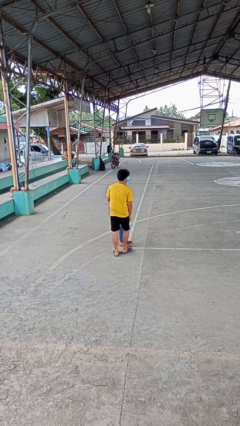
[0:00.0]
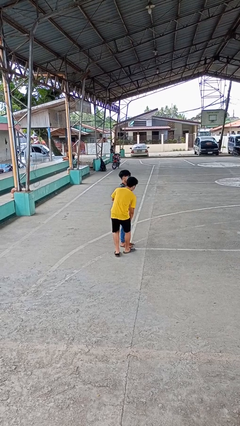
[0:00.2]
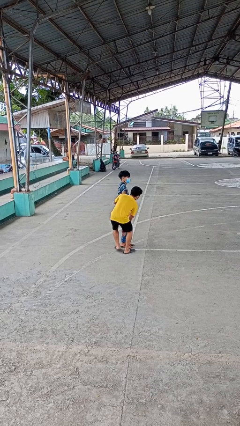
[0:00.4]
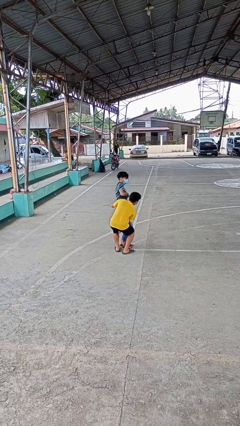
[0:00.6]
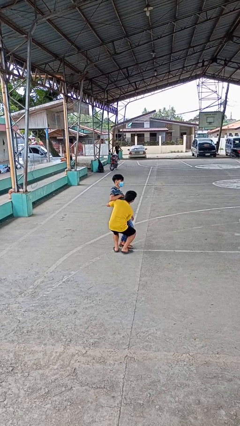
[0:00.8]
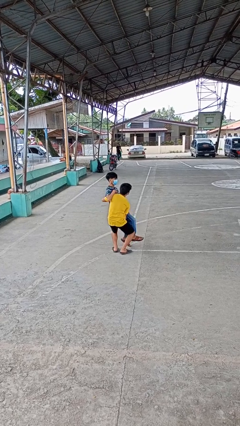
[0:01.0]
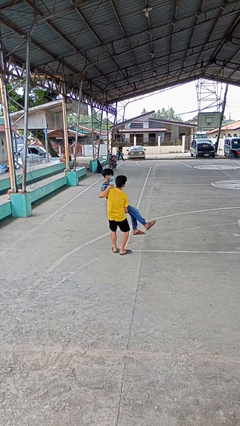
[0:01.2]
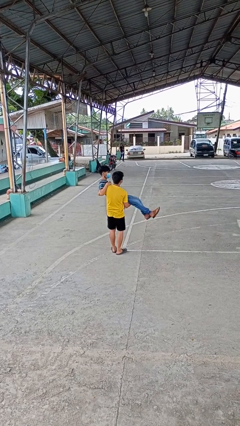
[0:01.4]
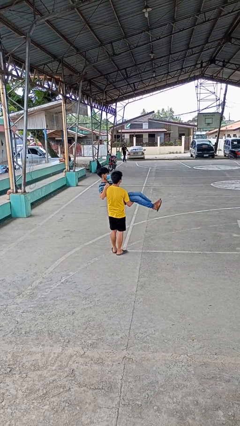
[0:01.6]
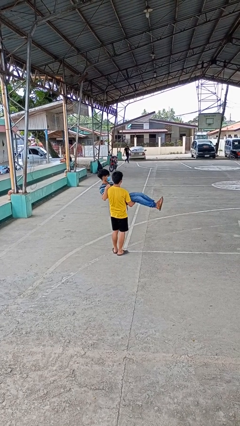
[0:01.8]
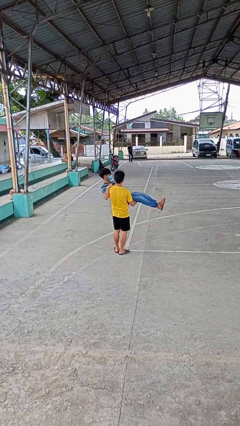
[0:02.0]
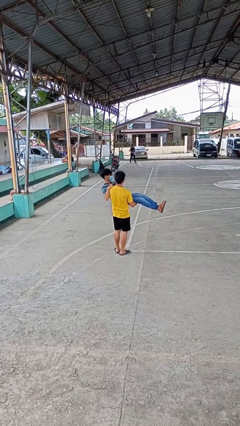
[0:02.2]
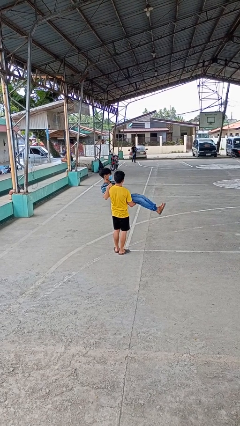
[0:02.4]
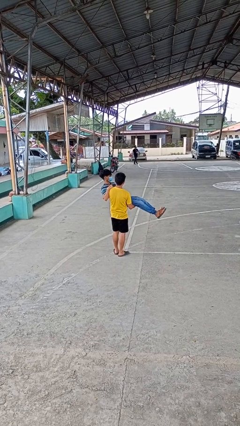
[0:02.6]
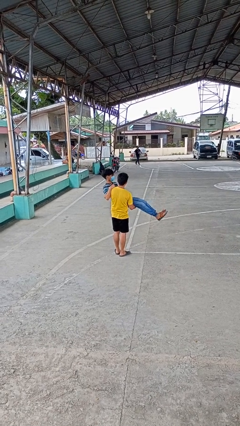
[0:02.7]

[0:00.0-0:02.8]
person picks up person

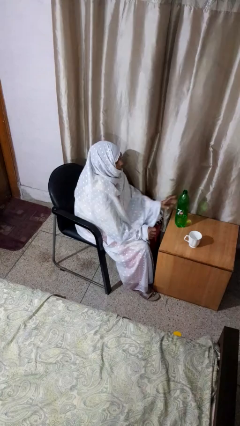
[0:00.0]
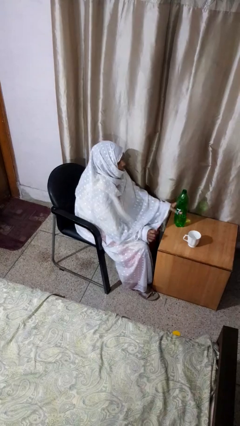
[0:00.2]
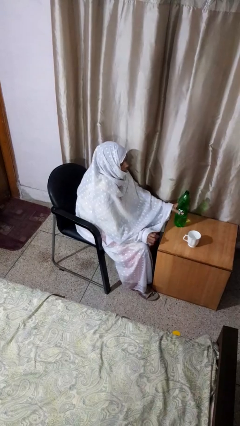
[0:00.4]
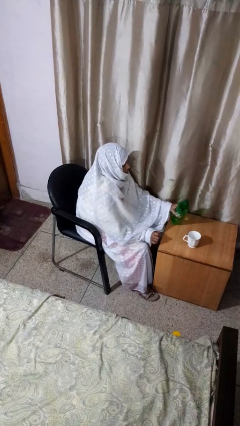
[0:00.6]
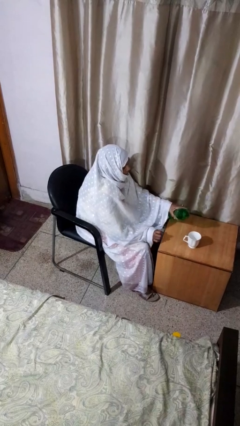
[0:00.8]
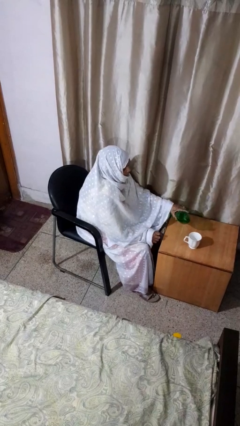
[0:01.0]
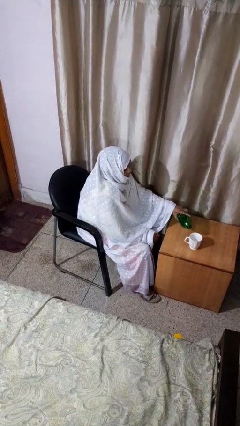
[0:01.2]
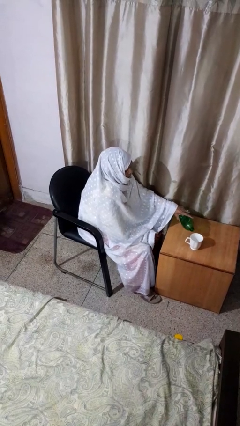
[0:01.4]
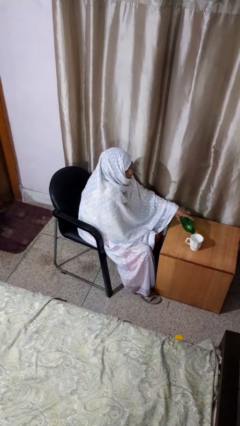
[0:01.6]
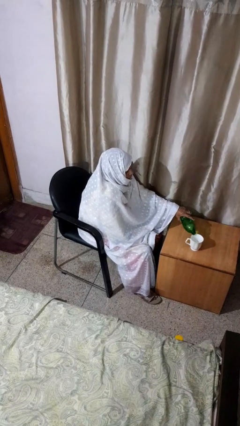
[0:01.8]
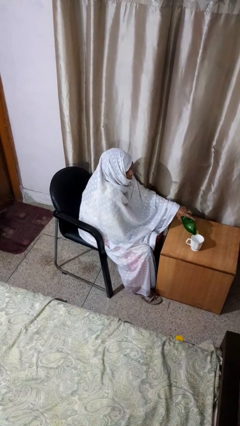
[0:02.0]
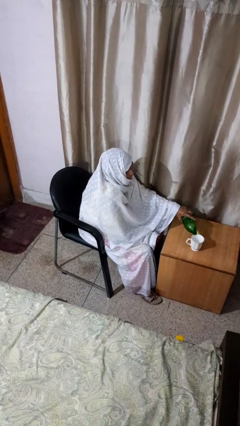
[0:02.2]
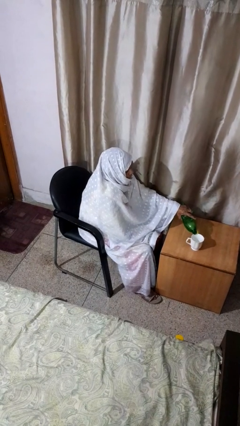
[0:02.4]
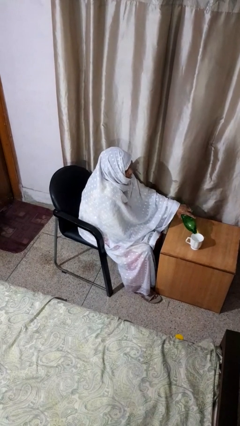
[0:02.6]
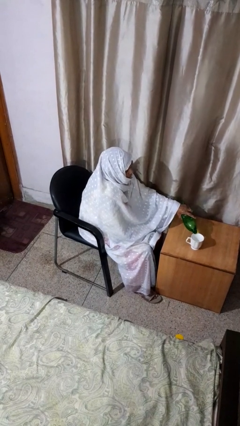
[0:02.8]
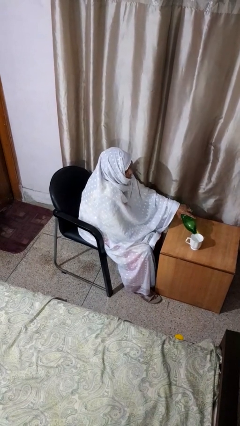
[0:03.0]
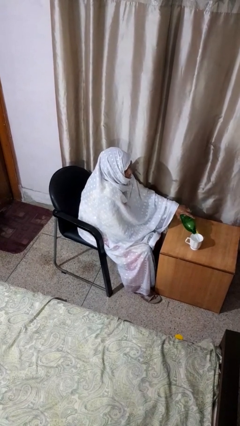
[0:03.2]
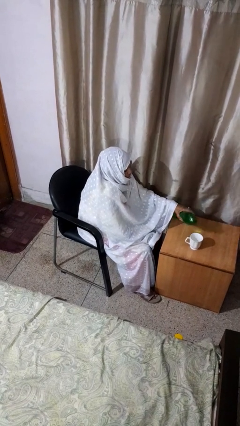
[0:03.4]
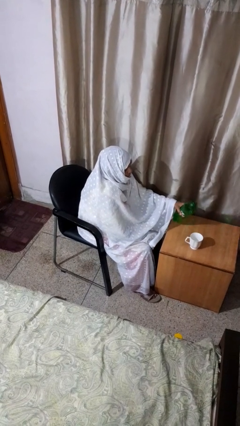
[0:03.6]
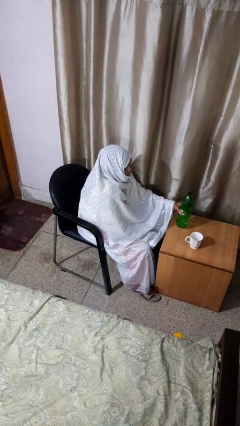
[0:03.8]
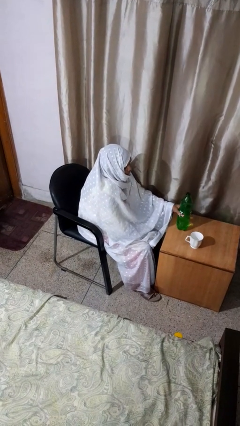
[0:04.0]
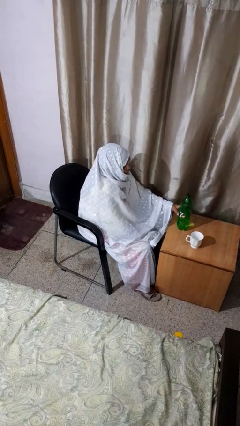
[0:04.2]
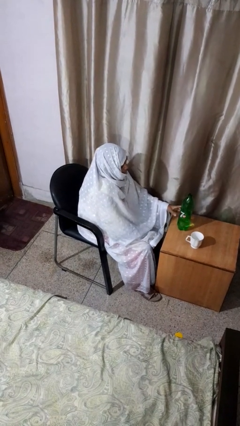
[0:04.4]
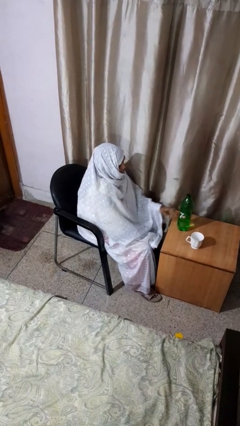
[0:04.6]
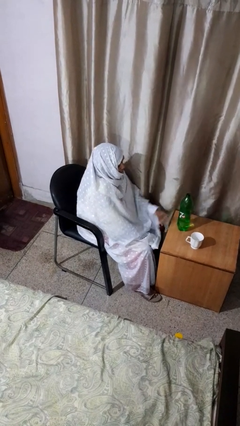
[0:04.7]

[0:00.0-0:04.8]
person pours liquid into cup

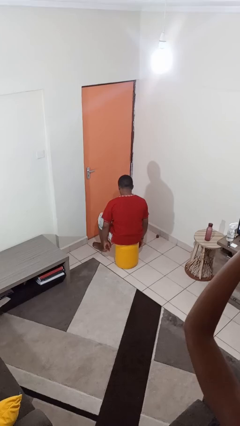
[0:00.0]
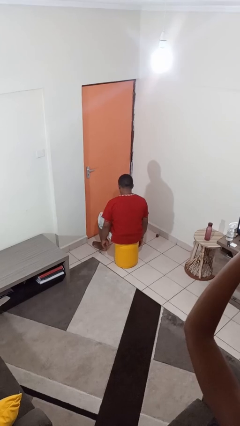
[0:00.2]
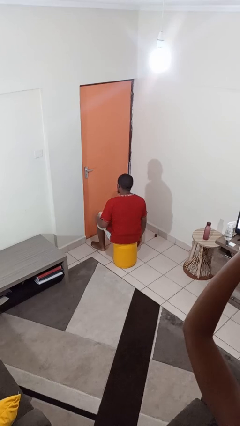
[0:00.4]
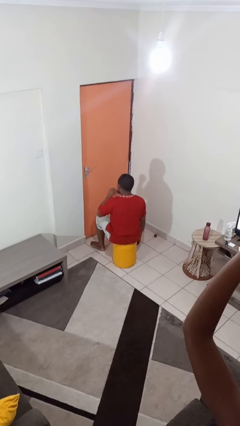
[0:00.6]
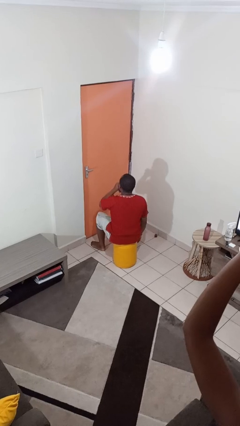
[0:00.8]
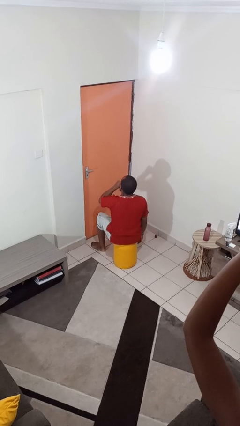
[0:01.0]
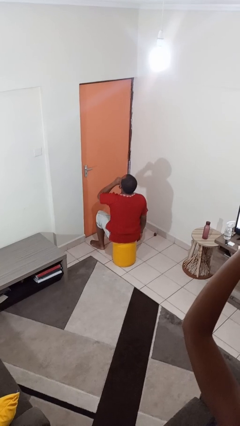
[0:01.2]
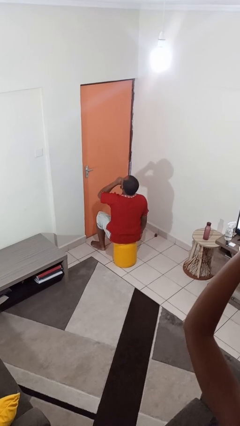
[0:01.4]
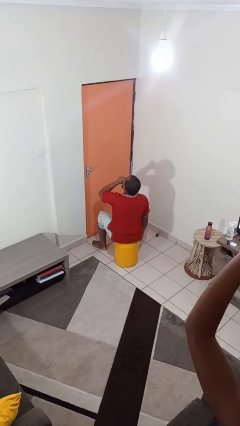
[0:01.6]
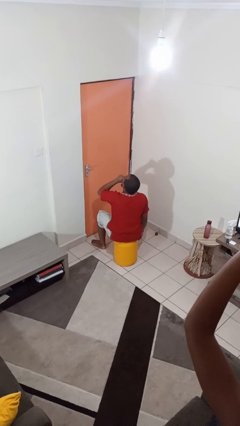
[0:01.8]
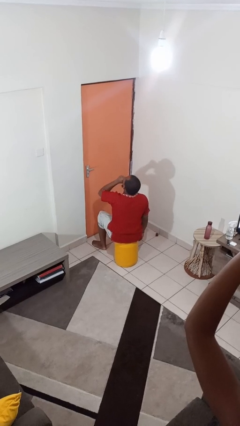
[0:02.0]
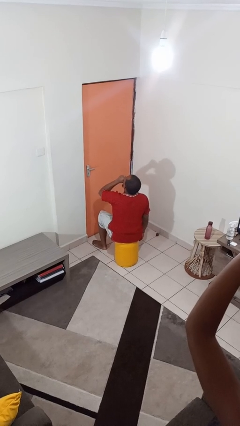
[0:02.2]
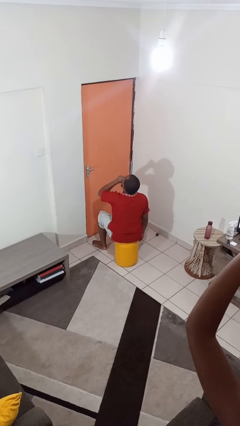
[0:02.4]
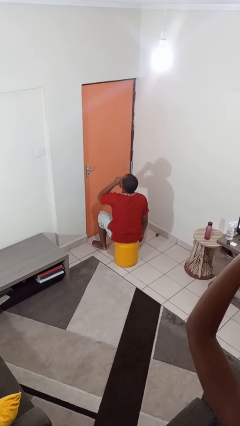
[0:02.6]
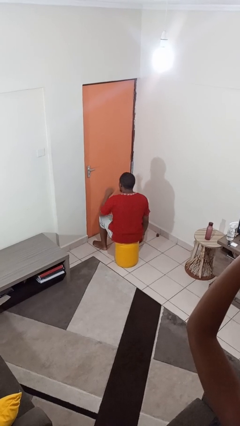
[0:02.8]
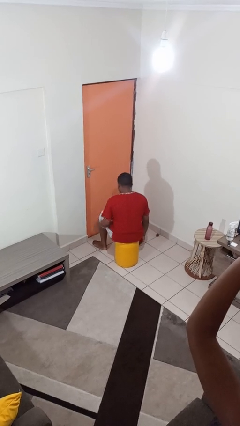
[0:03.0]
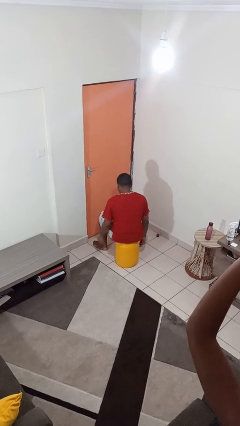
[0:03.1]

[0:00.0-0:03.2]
person yawns

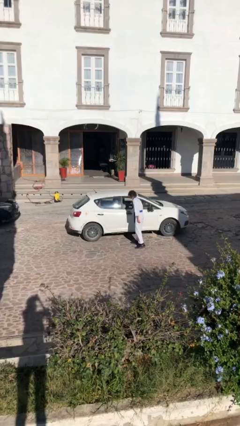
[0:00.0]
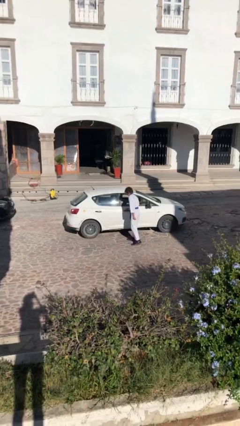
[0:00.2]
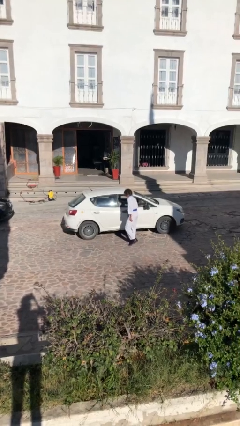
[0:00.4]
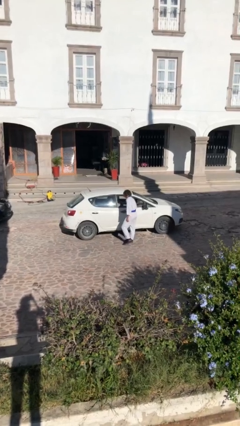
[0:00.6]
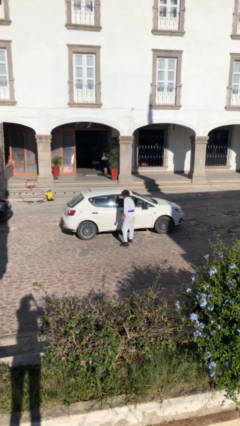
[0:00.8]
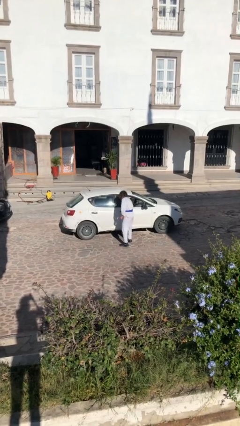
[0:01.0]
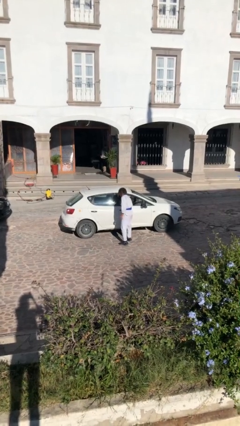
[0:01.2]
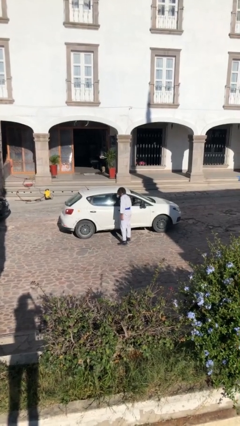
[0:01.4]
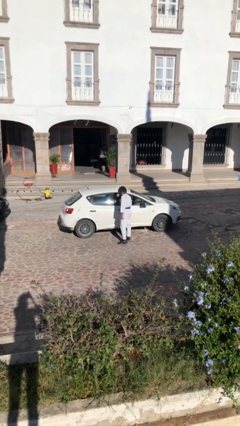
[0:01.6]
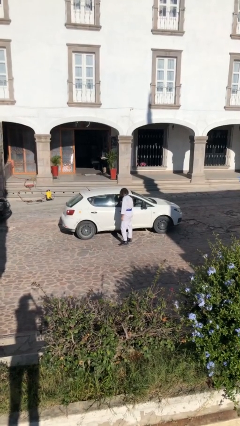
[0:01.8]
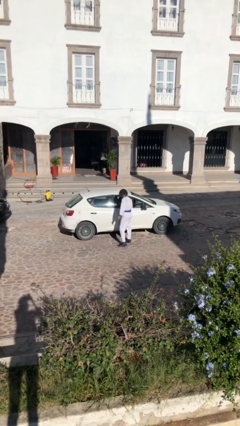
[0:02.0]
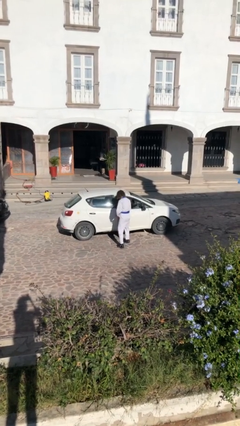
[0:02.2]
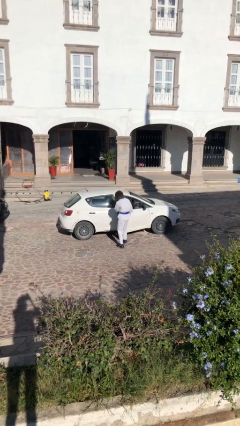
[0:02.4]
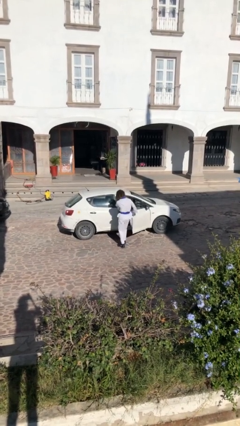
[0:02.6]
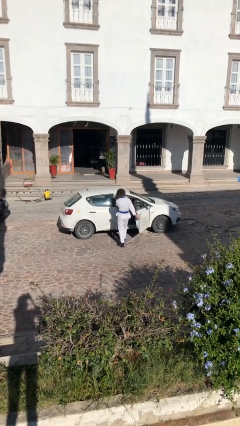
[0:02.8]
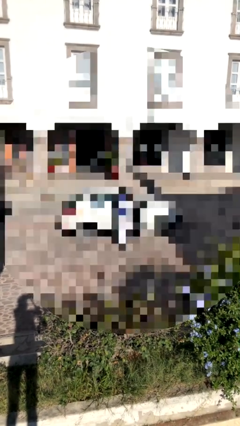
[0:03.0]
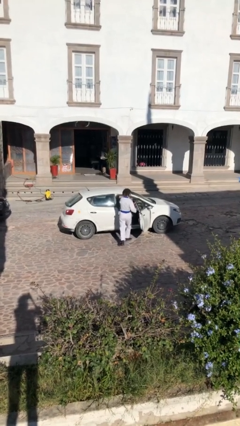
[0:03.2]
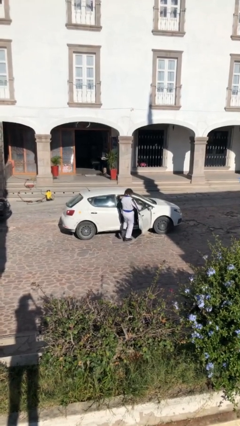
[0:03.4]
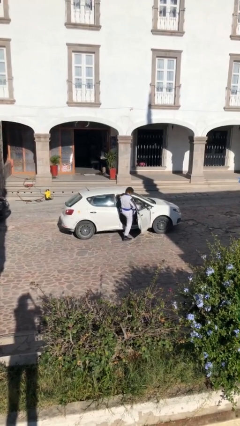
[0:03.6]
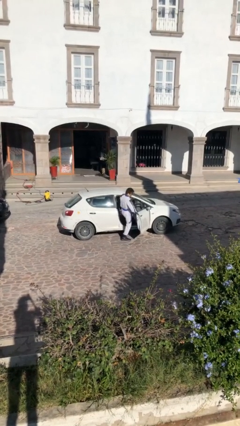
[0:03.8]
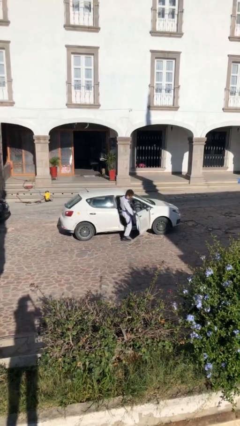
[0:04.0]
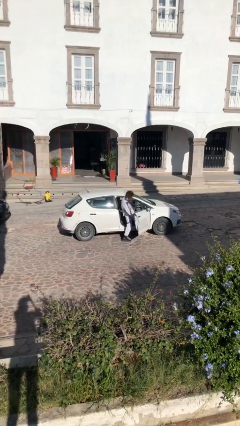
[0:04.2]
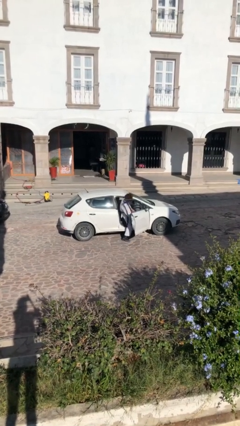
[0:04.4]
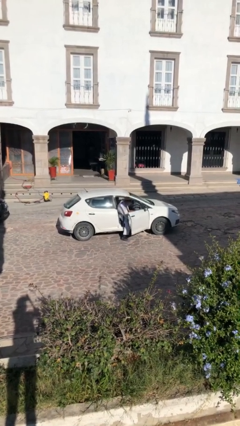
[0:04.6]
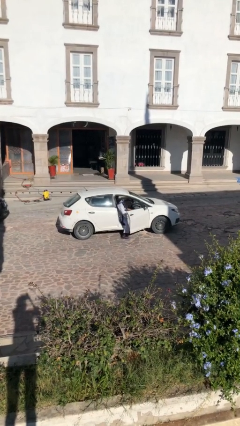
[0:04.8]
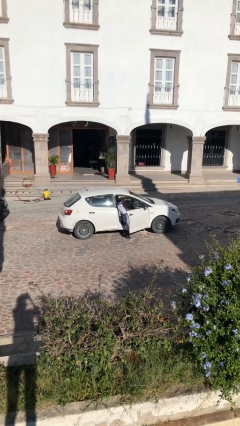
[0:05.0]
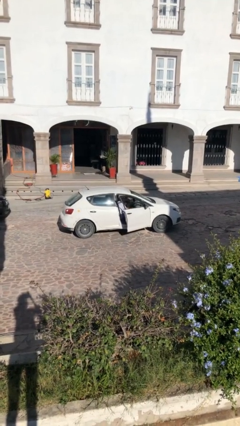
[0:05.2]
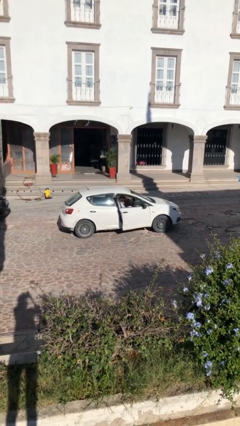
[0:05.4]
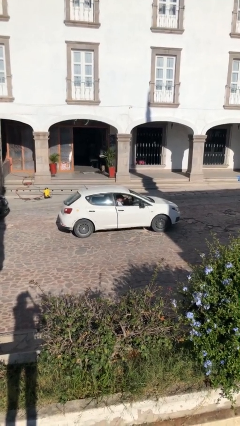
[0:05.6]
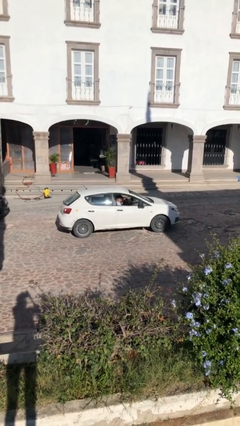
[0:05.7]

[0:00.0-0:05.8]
car picks up person

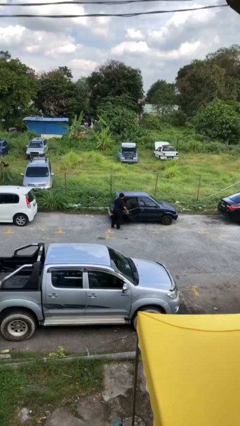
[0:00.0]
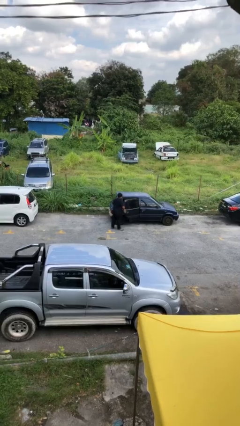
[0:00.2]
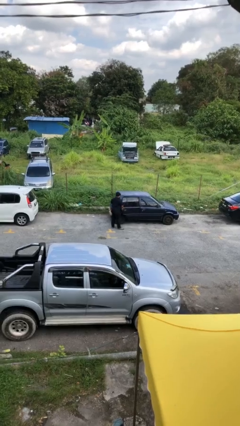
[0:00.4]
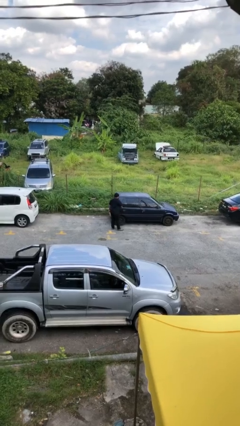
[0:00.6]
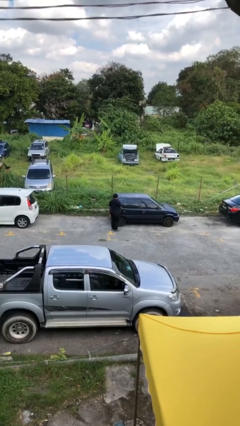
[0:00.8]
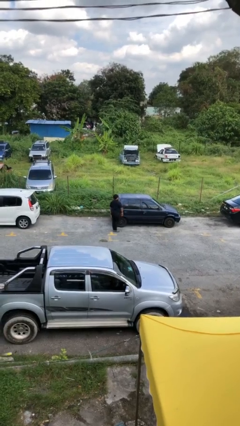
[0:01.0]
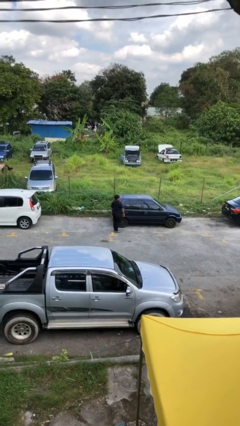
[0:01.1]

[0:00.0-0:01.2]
person closes car door
